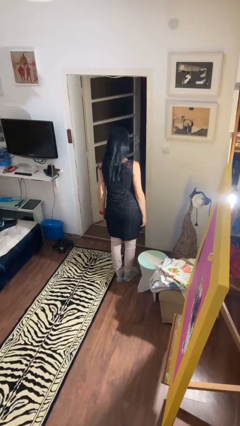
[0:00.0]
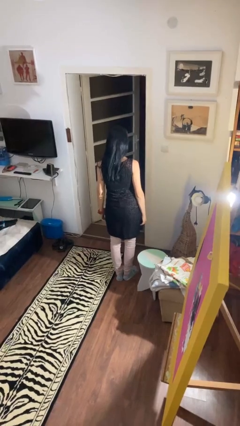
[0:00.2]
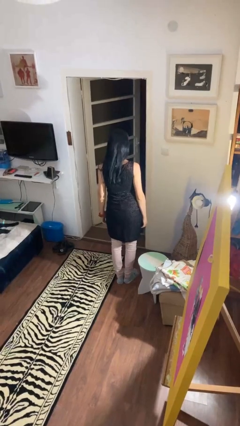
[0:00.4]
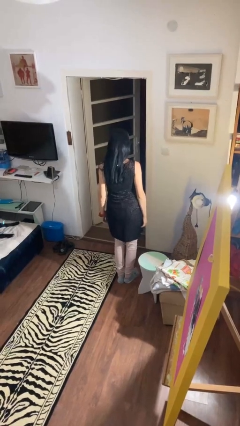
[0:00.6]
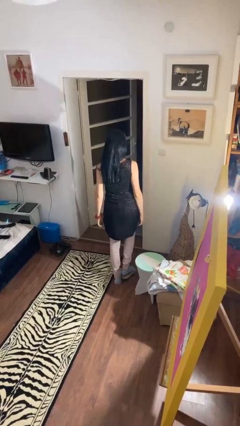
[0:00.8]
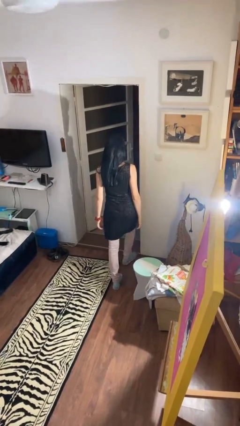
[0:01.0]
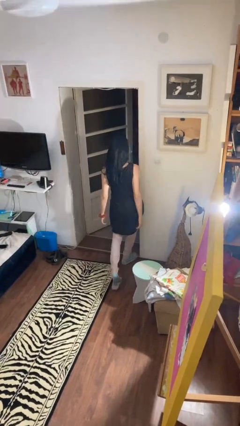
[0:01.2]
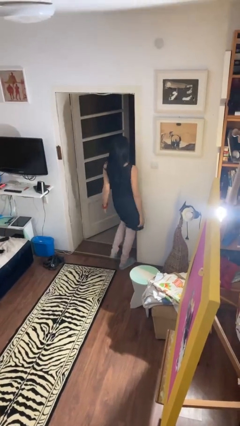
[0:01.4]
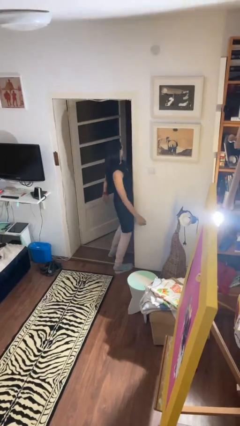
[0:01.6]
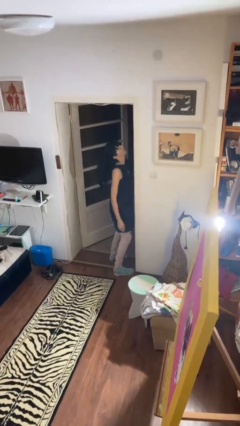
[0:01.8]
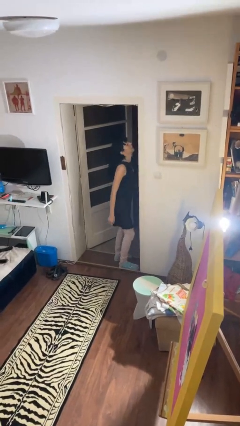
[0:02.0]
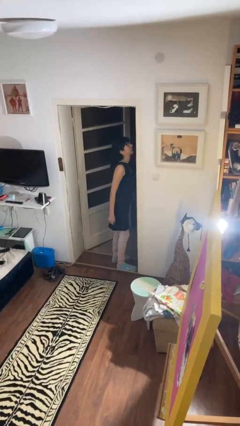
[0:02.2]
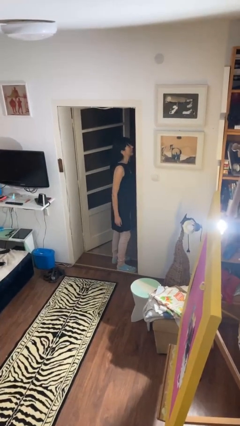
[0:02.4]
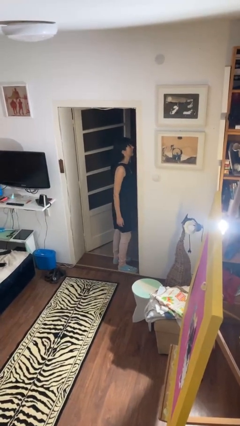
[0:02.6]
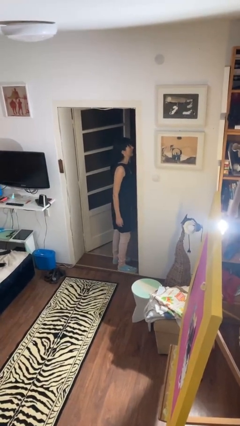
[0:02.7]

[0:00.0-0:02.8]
person bumps into wall

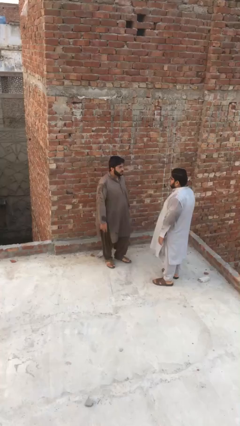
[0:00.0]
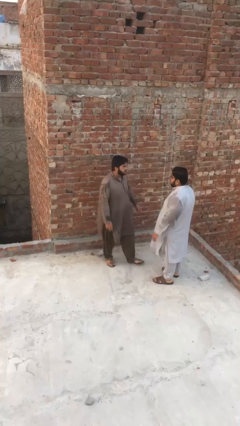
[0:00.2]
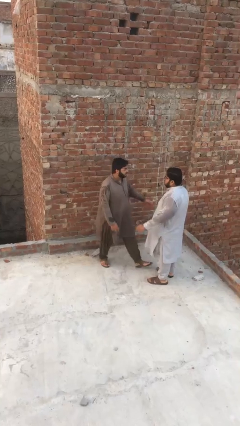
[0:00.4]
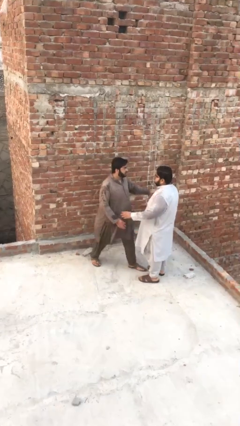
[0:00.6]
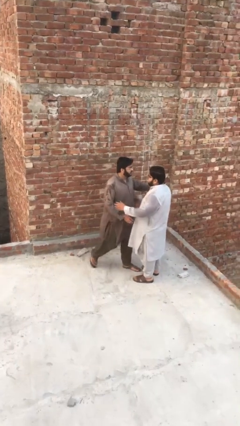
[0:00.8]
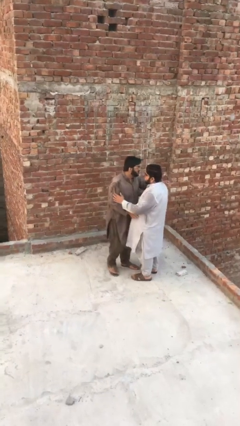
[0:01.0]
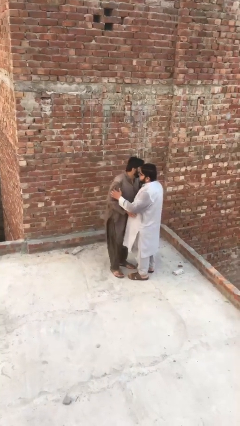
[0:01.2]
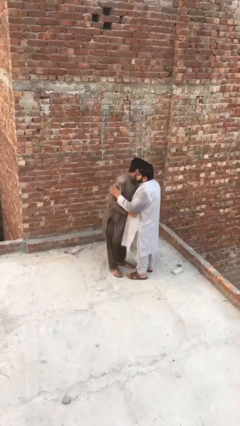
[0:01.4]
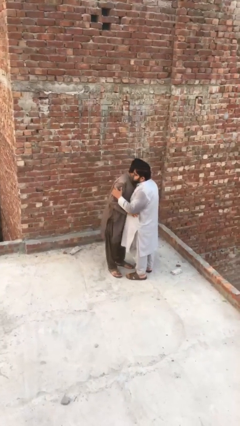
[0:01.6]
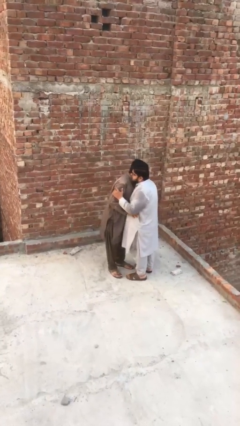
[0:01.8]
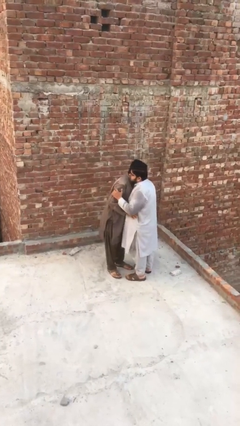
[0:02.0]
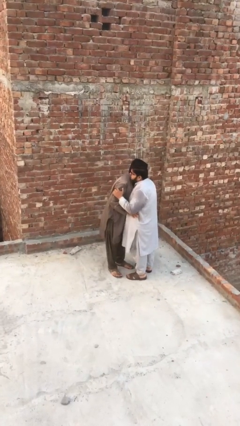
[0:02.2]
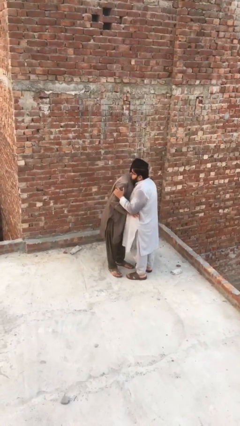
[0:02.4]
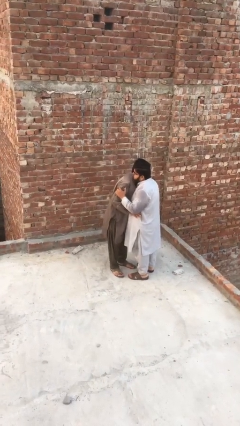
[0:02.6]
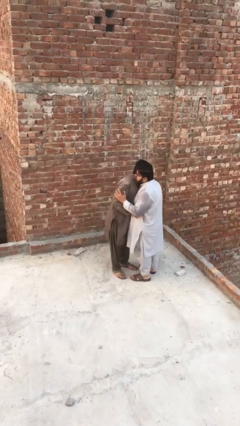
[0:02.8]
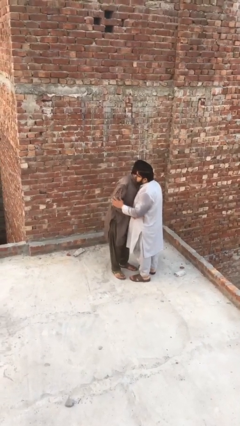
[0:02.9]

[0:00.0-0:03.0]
person embraces person

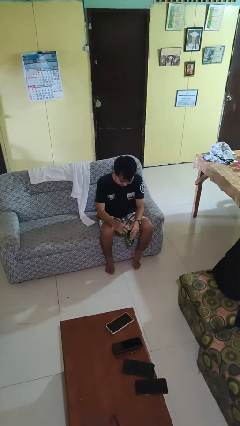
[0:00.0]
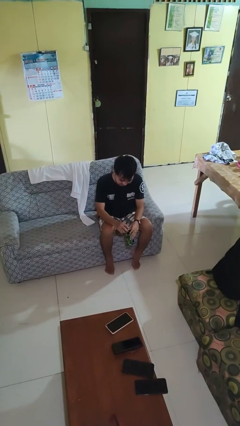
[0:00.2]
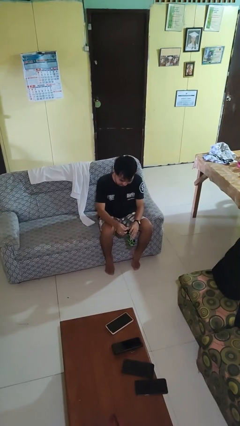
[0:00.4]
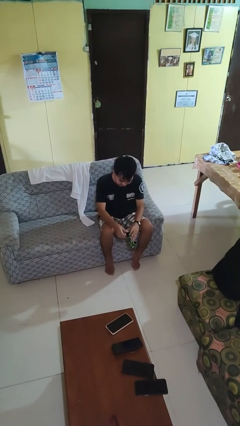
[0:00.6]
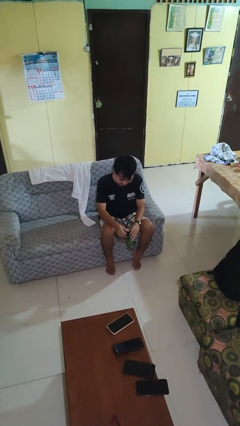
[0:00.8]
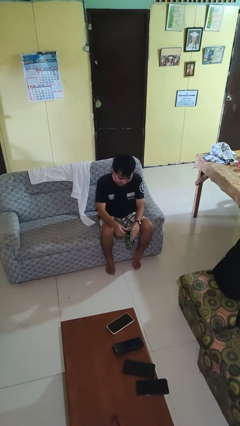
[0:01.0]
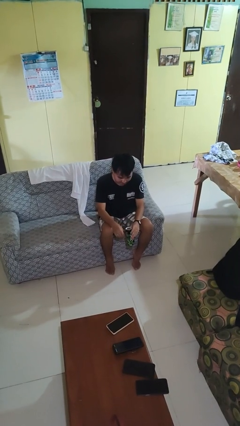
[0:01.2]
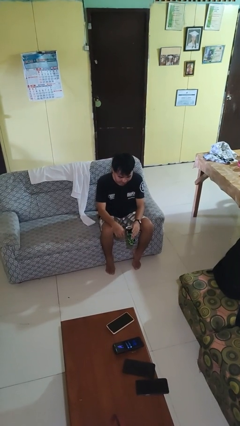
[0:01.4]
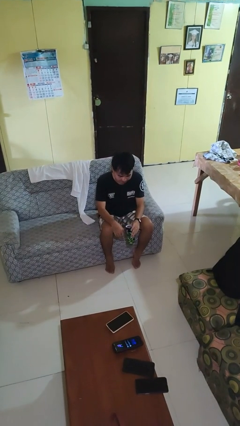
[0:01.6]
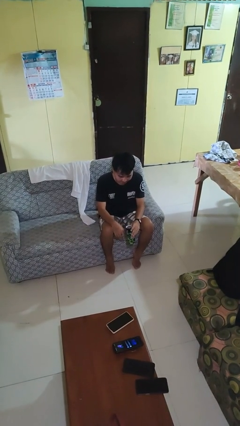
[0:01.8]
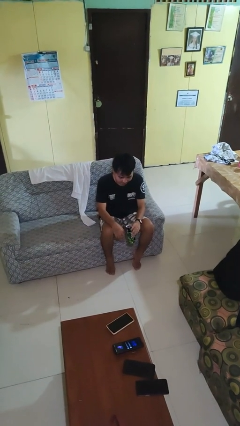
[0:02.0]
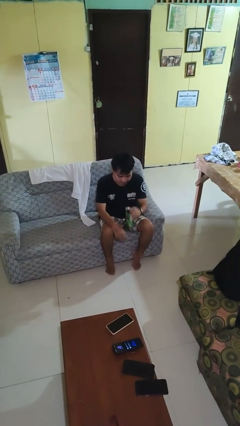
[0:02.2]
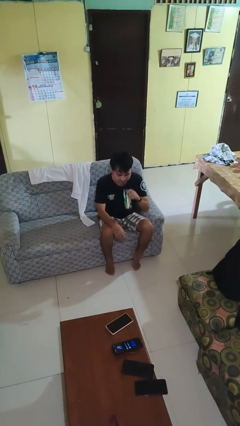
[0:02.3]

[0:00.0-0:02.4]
person opens beverage can

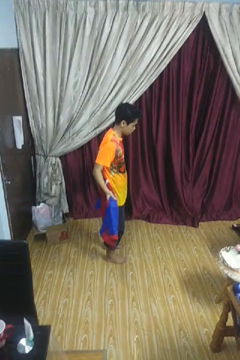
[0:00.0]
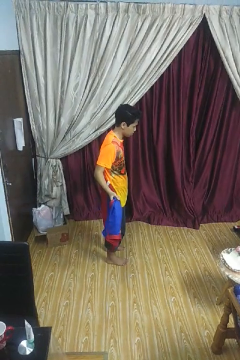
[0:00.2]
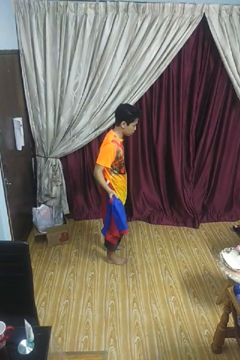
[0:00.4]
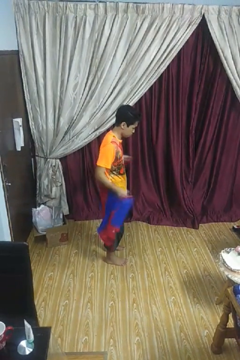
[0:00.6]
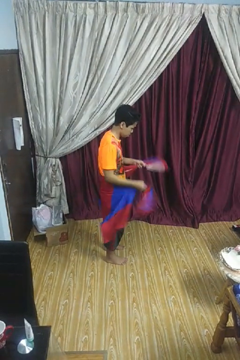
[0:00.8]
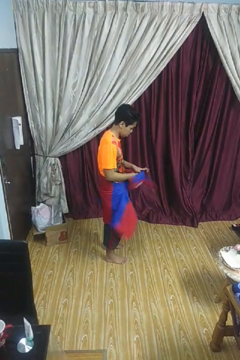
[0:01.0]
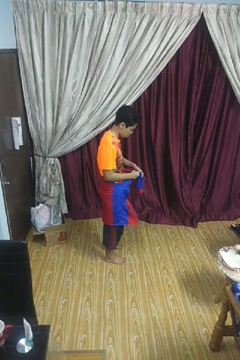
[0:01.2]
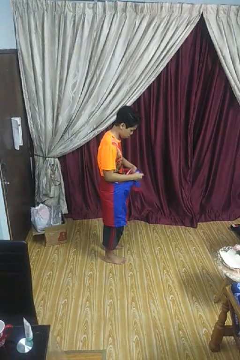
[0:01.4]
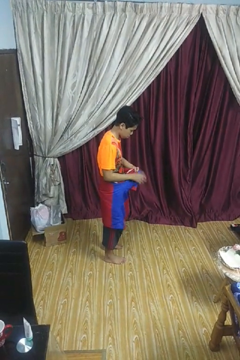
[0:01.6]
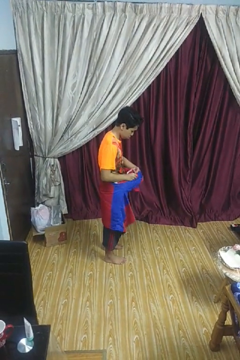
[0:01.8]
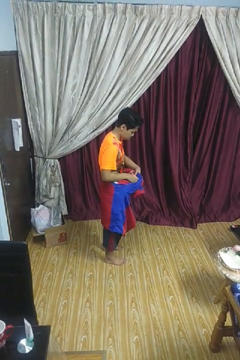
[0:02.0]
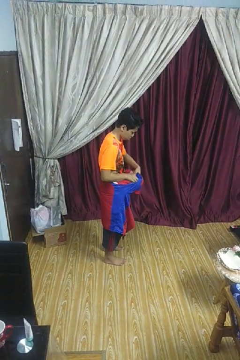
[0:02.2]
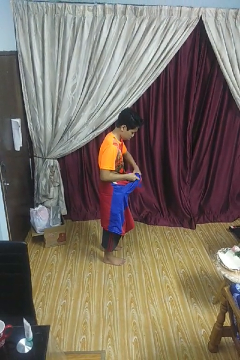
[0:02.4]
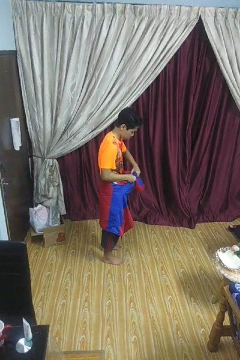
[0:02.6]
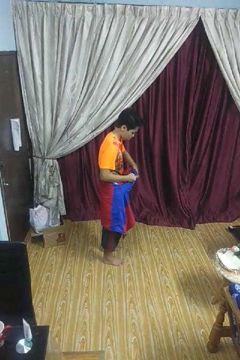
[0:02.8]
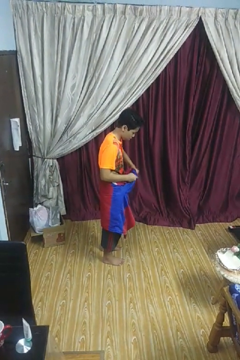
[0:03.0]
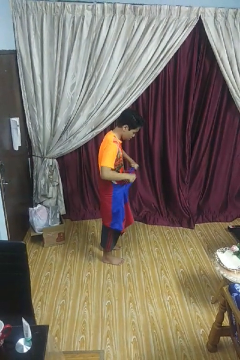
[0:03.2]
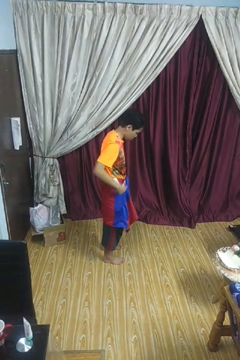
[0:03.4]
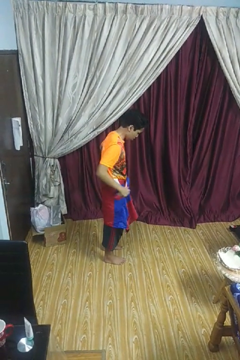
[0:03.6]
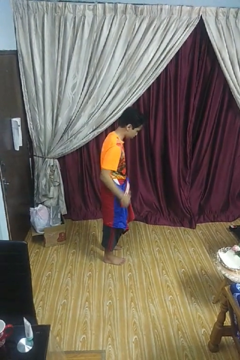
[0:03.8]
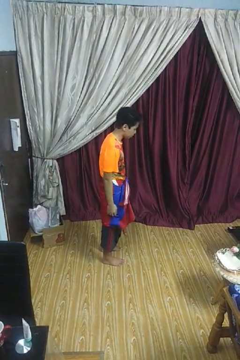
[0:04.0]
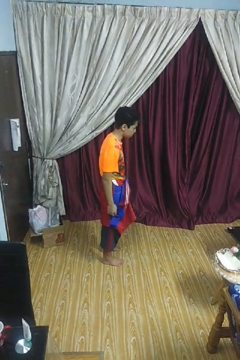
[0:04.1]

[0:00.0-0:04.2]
person ties jacket around waist

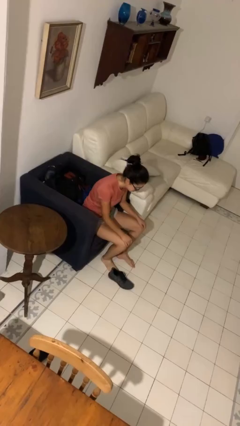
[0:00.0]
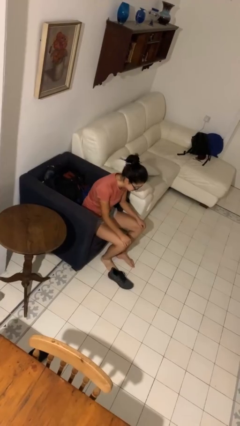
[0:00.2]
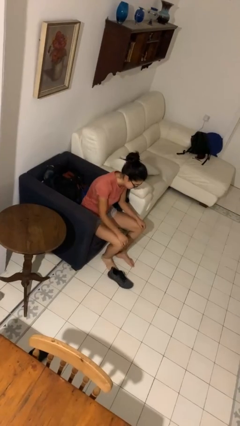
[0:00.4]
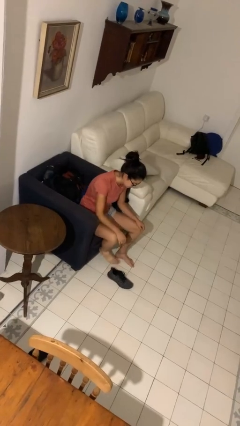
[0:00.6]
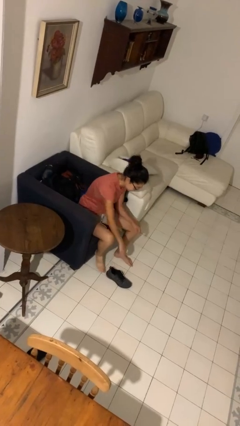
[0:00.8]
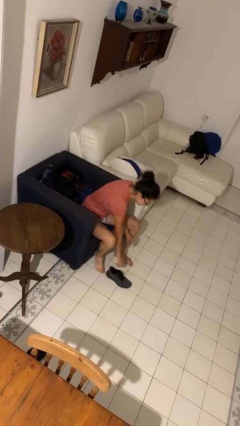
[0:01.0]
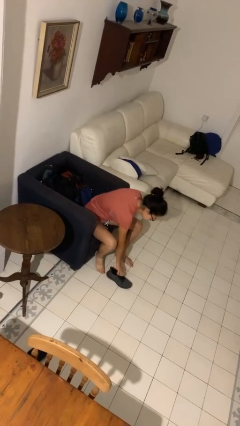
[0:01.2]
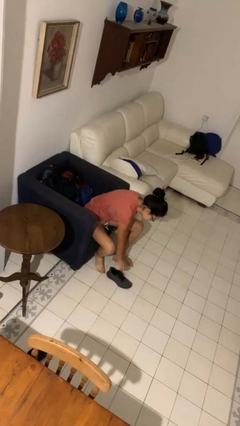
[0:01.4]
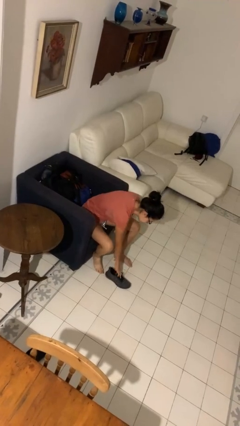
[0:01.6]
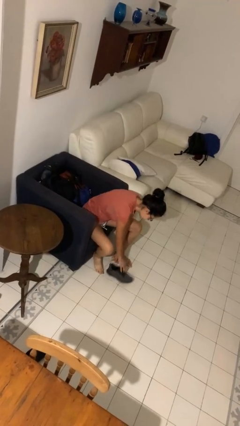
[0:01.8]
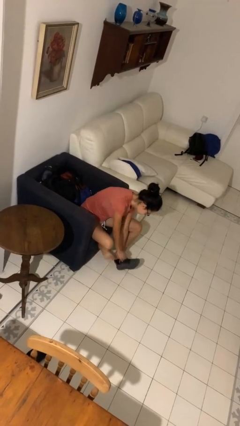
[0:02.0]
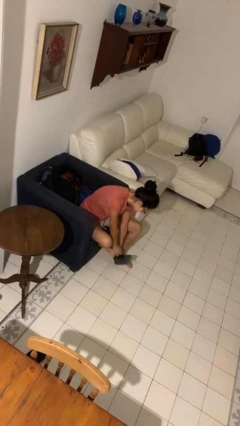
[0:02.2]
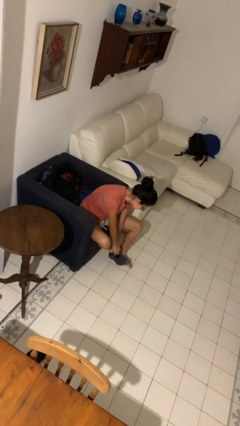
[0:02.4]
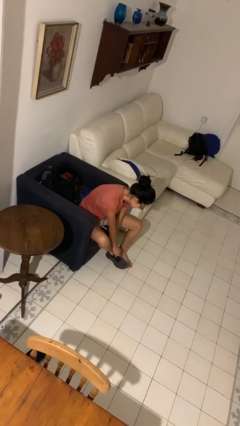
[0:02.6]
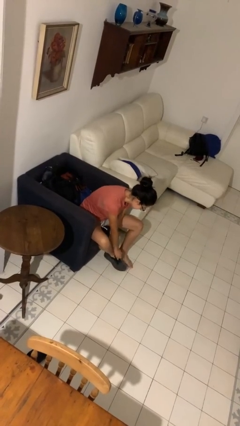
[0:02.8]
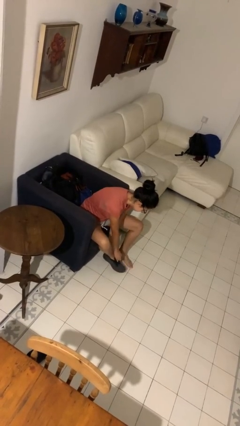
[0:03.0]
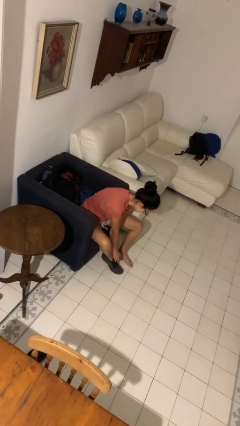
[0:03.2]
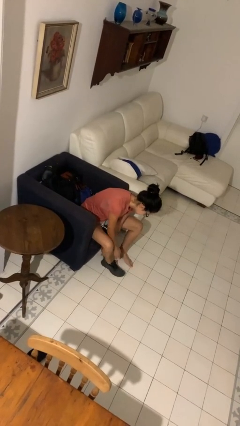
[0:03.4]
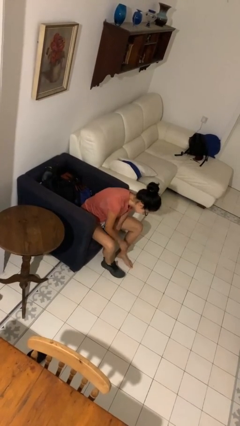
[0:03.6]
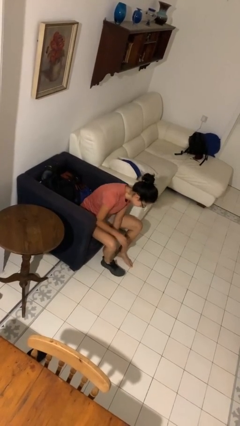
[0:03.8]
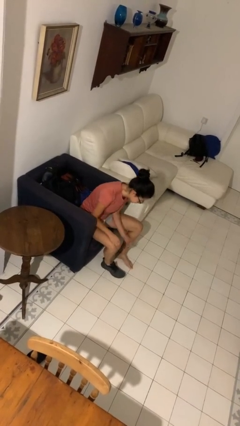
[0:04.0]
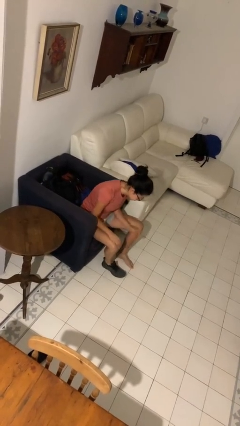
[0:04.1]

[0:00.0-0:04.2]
person puts on shoes

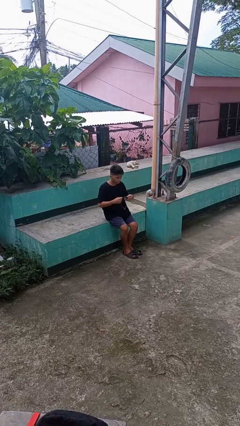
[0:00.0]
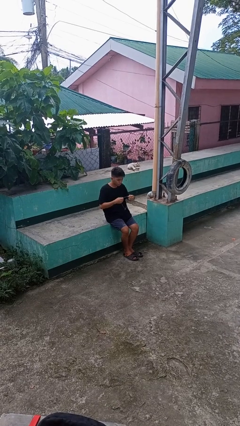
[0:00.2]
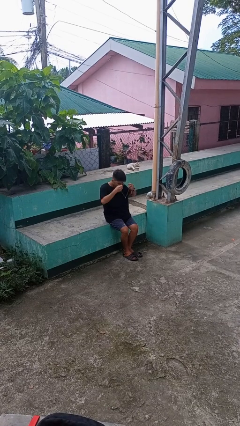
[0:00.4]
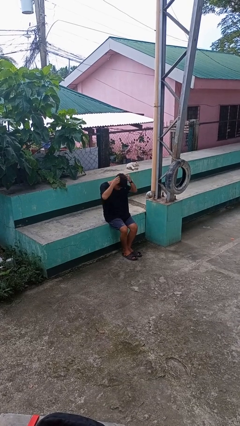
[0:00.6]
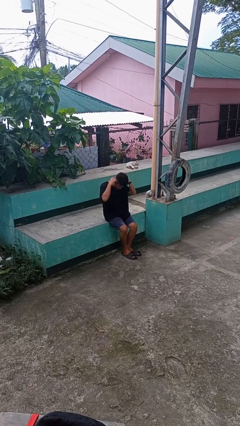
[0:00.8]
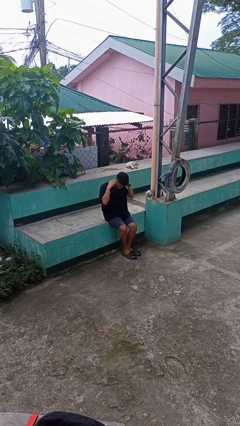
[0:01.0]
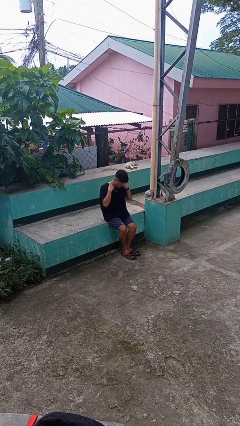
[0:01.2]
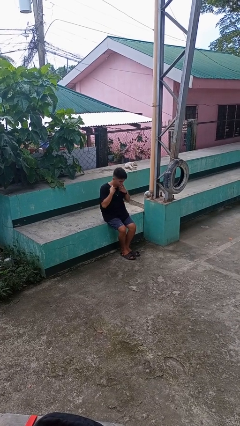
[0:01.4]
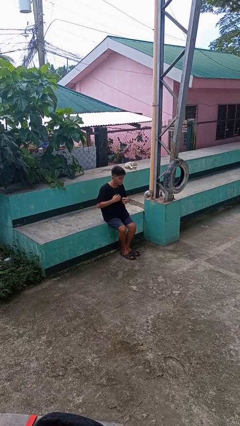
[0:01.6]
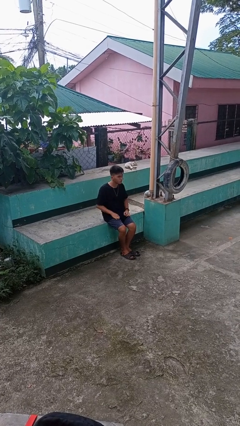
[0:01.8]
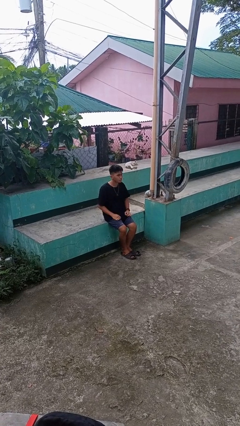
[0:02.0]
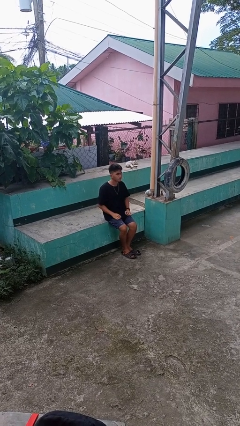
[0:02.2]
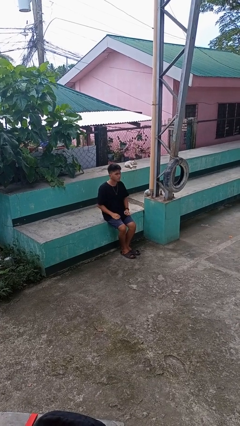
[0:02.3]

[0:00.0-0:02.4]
person puts on necklace
